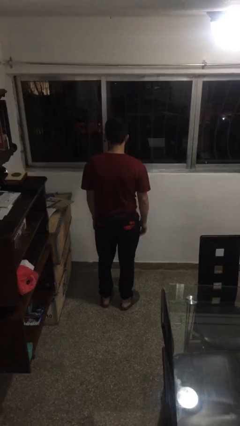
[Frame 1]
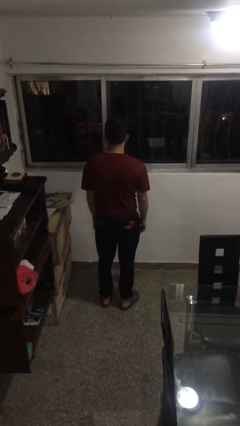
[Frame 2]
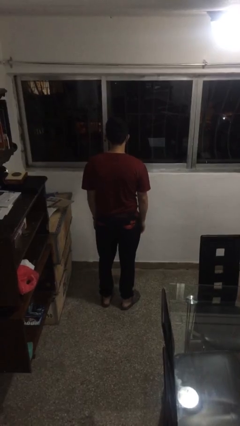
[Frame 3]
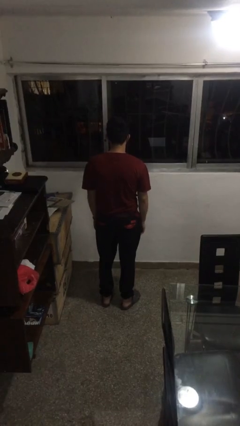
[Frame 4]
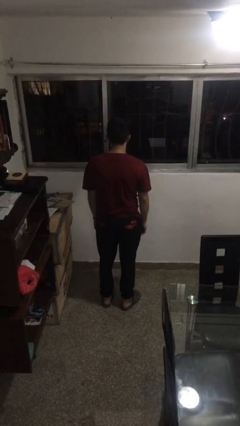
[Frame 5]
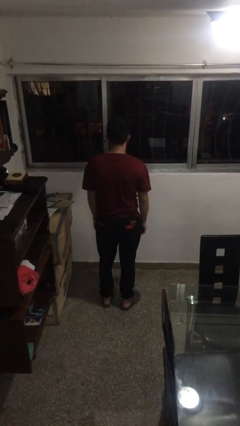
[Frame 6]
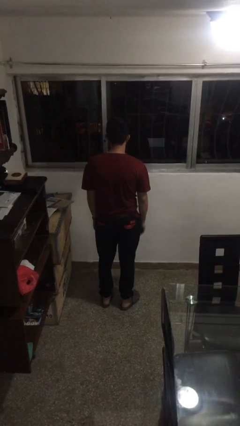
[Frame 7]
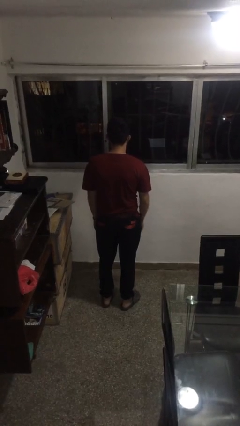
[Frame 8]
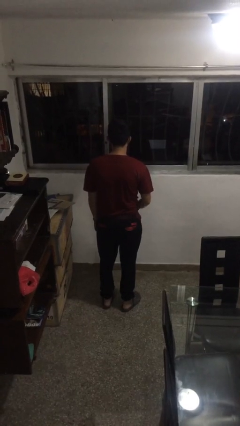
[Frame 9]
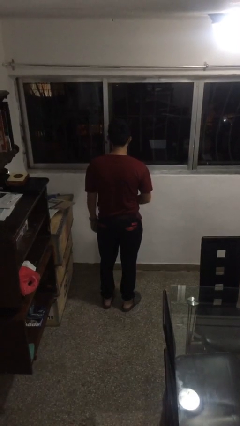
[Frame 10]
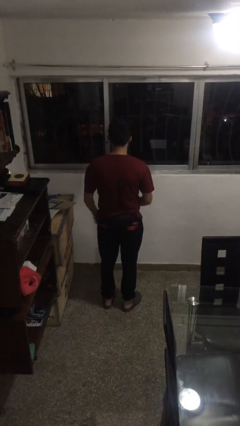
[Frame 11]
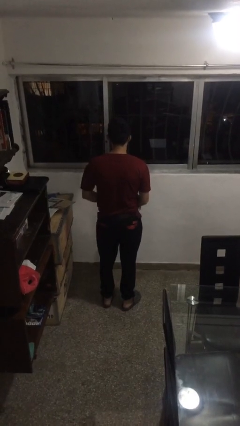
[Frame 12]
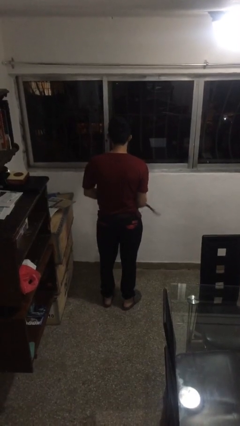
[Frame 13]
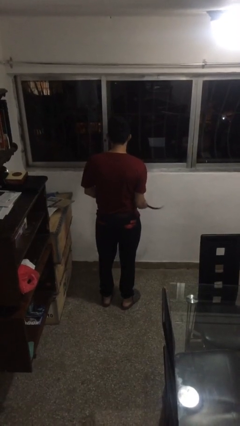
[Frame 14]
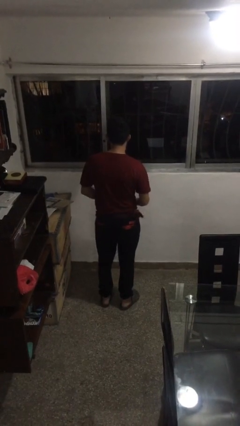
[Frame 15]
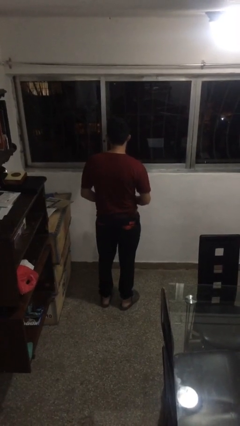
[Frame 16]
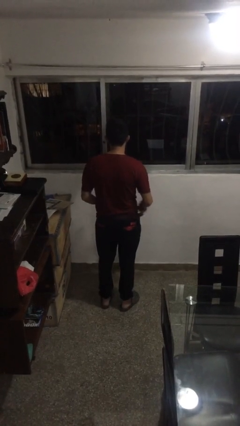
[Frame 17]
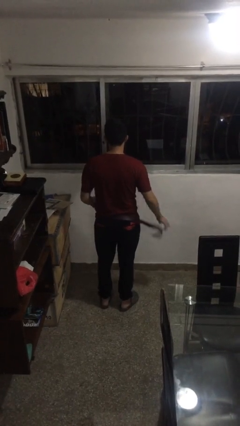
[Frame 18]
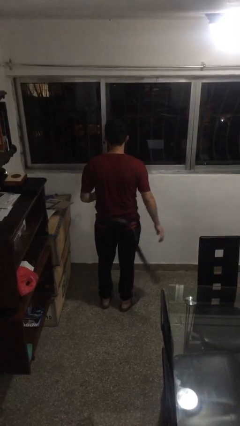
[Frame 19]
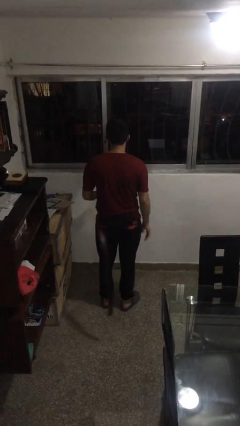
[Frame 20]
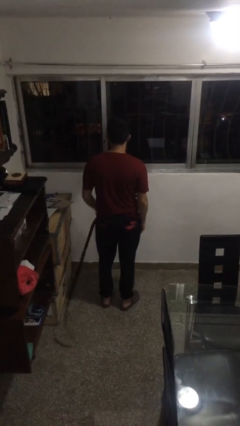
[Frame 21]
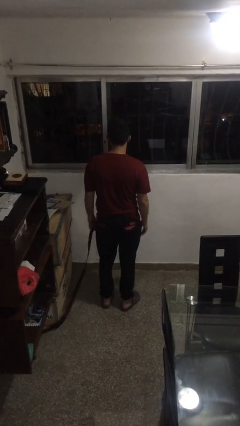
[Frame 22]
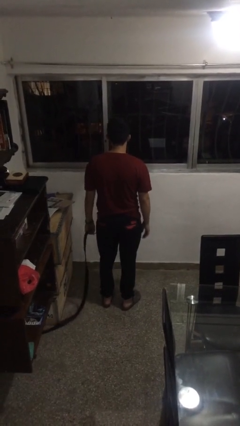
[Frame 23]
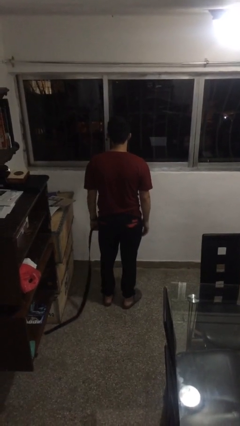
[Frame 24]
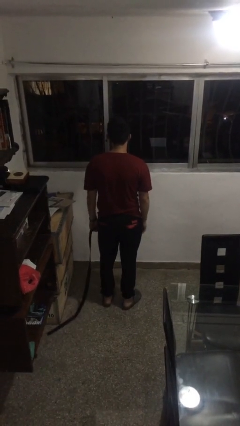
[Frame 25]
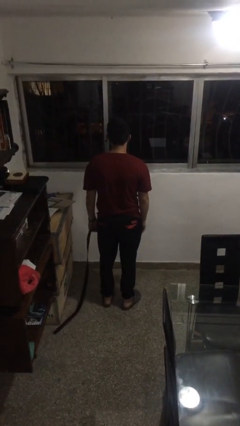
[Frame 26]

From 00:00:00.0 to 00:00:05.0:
person takes off belt

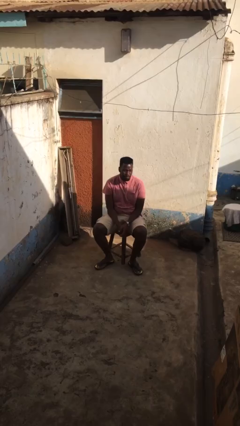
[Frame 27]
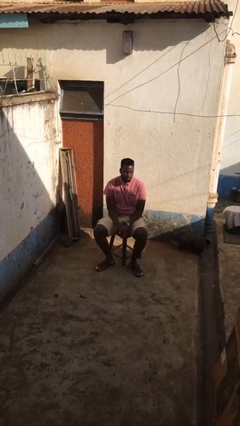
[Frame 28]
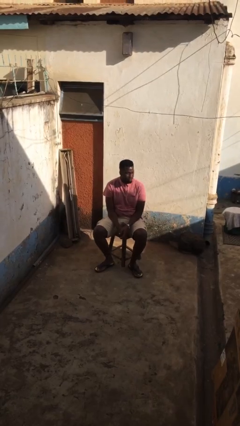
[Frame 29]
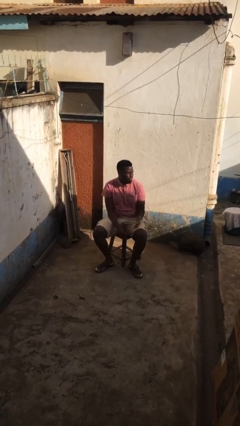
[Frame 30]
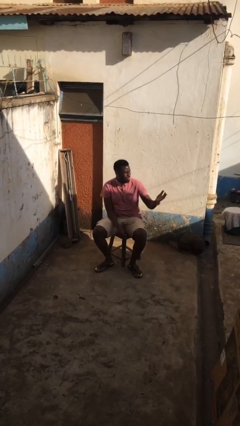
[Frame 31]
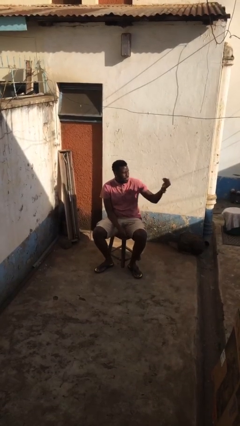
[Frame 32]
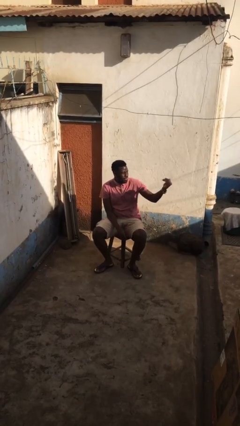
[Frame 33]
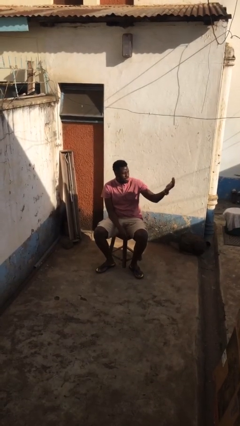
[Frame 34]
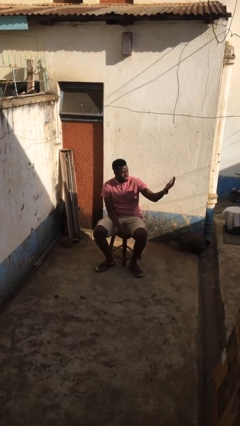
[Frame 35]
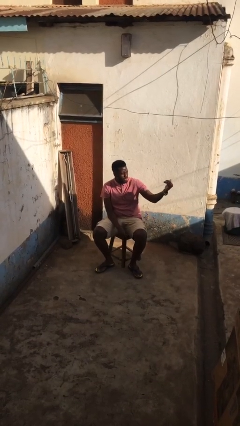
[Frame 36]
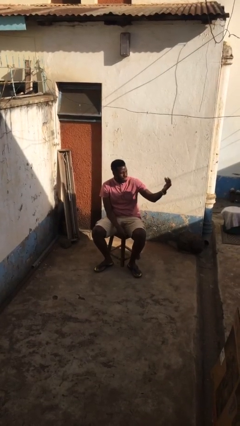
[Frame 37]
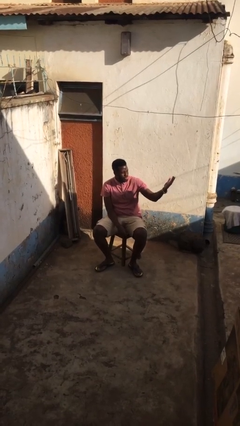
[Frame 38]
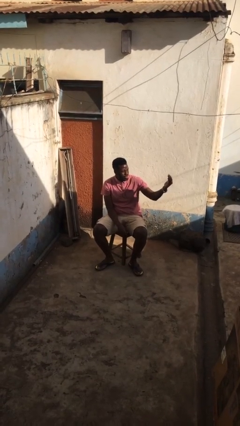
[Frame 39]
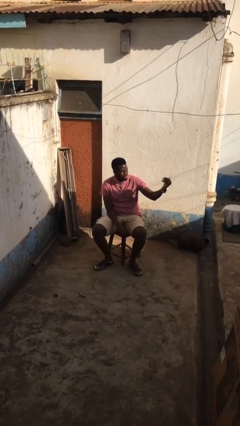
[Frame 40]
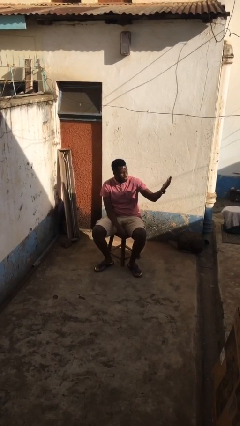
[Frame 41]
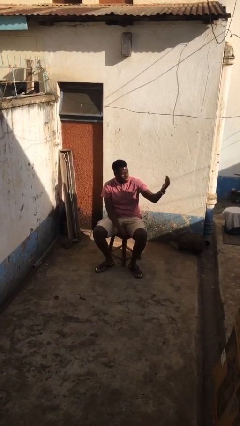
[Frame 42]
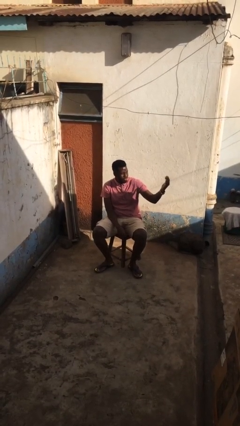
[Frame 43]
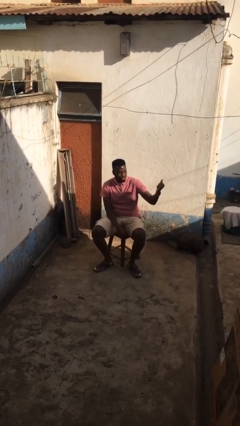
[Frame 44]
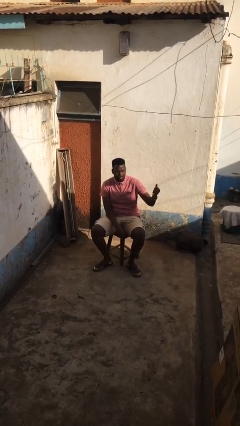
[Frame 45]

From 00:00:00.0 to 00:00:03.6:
person gestures come here

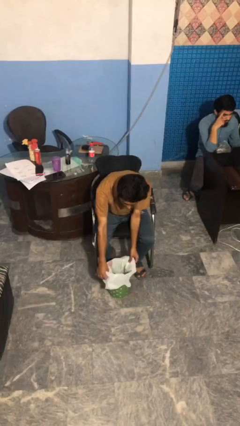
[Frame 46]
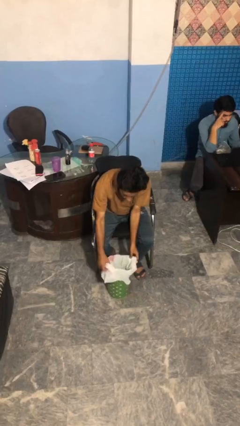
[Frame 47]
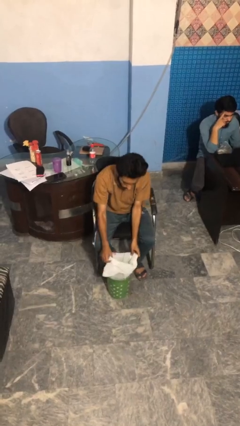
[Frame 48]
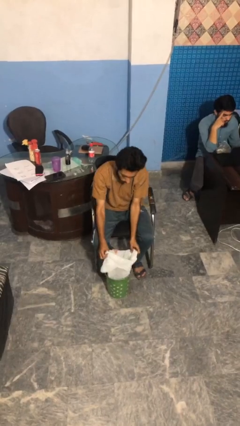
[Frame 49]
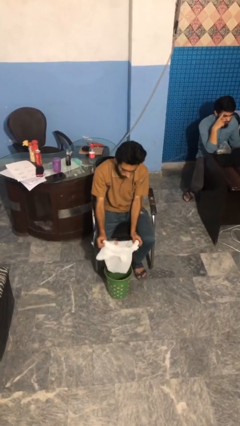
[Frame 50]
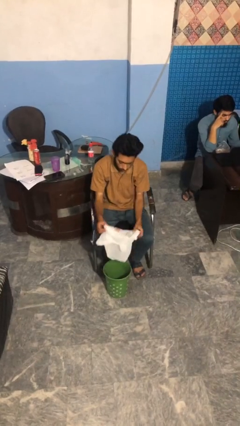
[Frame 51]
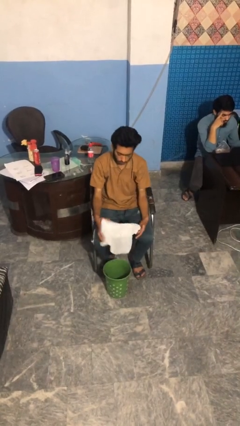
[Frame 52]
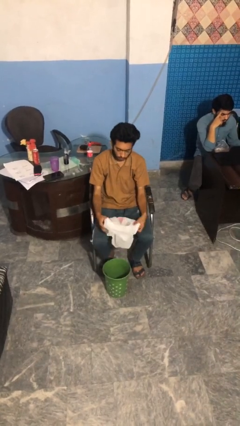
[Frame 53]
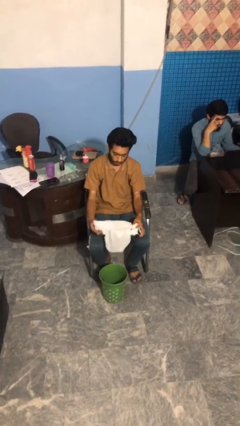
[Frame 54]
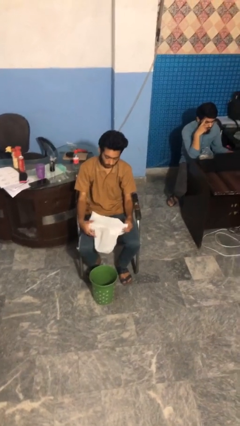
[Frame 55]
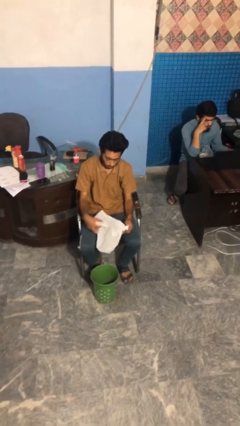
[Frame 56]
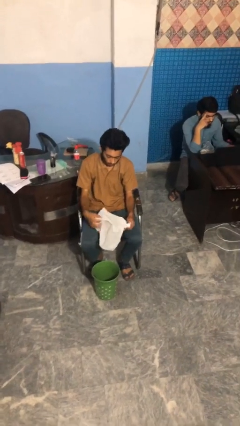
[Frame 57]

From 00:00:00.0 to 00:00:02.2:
person removes trashbag from trashcan

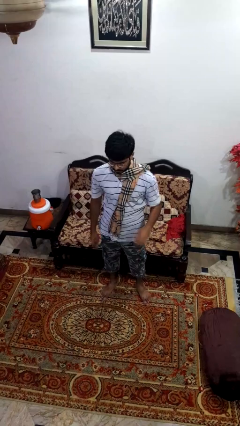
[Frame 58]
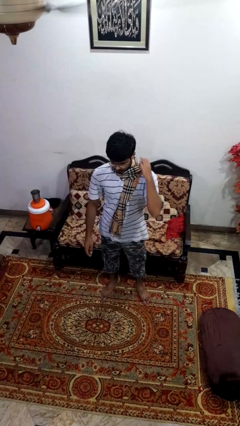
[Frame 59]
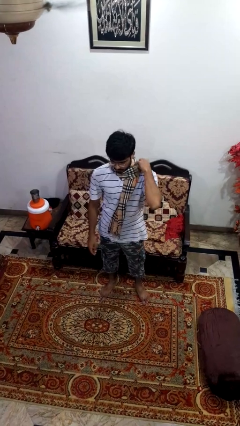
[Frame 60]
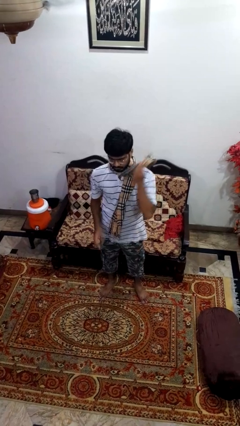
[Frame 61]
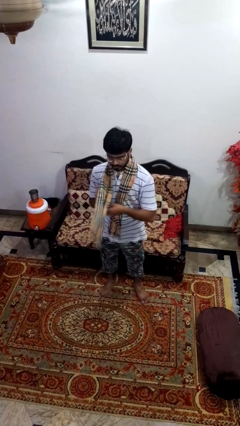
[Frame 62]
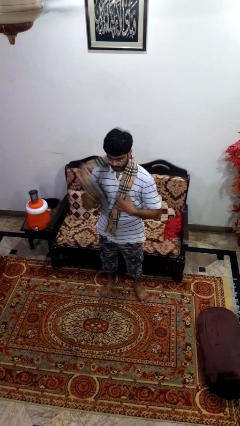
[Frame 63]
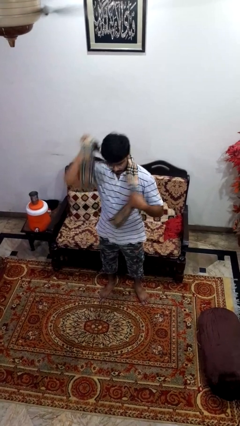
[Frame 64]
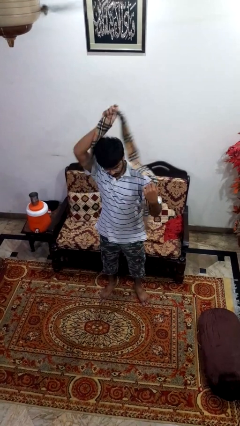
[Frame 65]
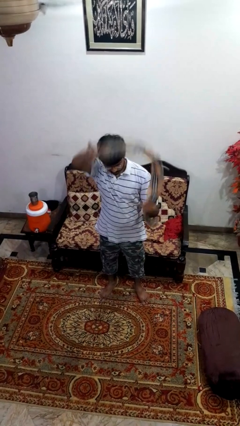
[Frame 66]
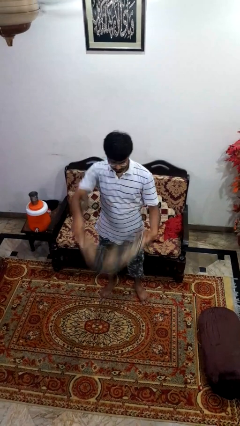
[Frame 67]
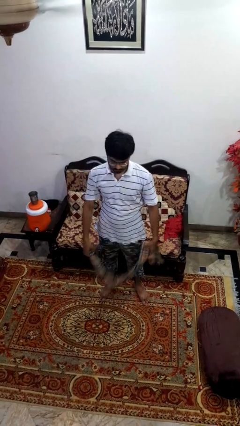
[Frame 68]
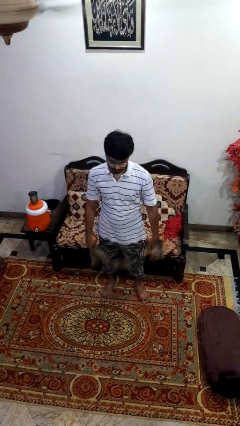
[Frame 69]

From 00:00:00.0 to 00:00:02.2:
person takes off scarf

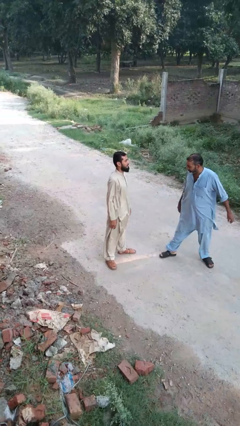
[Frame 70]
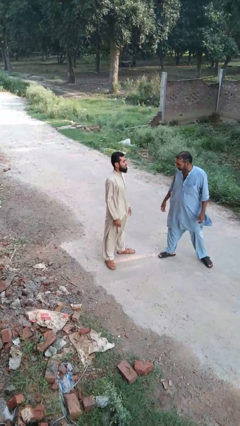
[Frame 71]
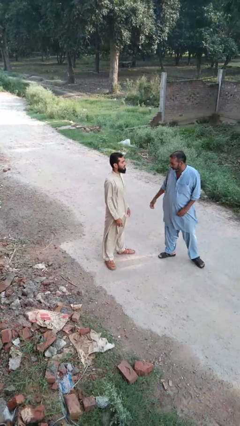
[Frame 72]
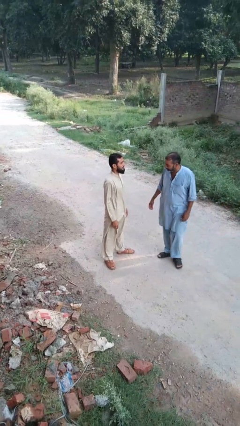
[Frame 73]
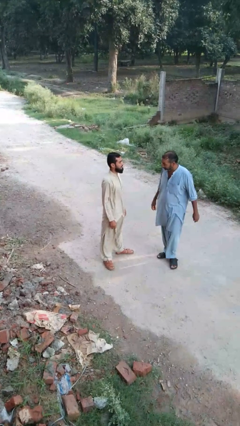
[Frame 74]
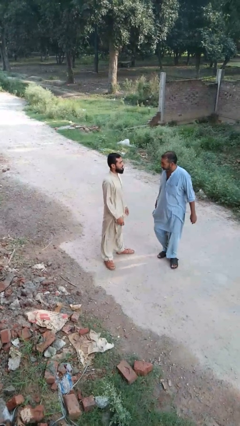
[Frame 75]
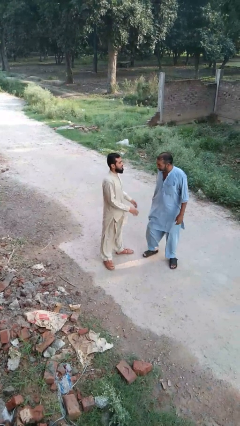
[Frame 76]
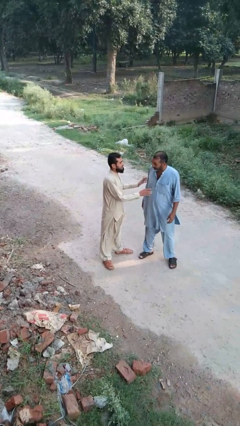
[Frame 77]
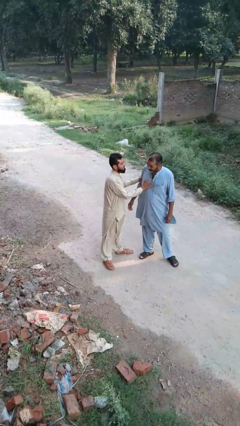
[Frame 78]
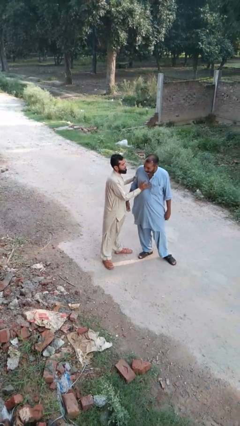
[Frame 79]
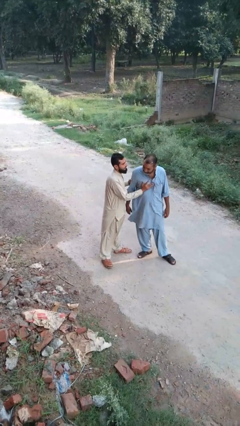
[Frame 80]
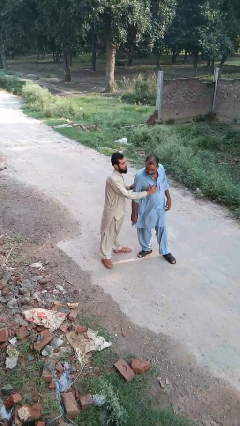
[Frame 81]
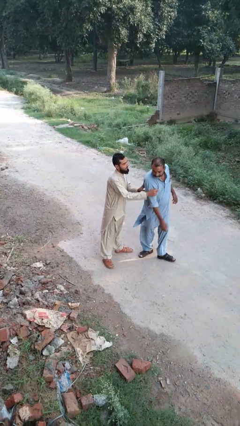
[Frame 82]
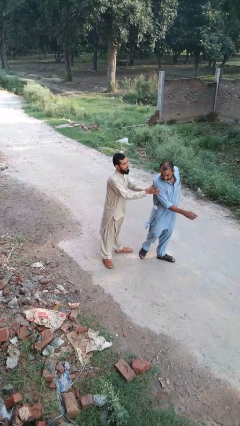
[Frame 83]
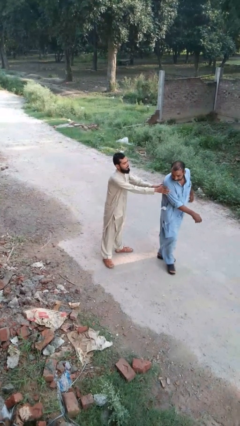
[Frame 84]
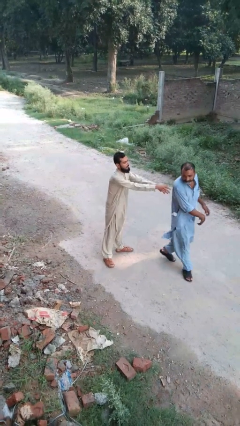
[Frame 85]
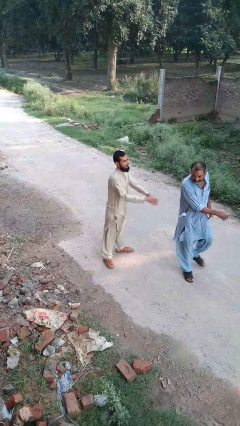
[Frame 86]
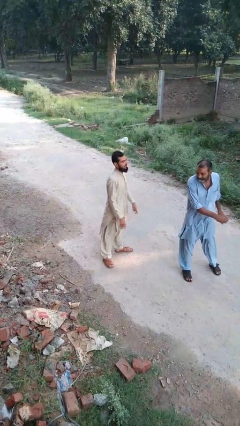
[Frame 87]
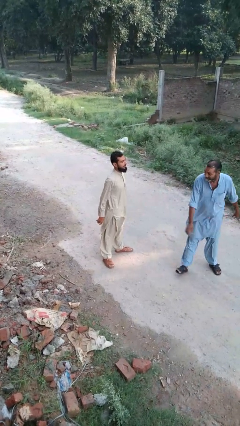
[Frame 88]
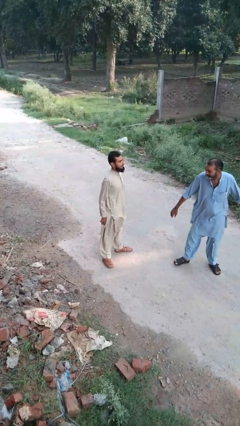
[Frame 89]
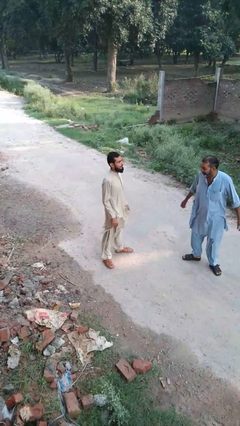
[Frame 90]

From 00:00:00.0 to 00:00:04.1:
person shoves person
